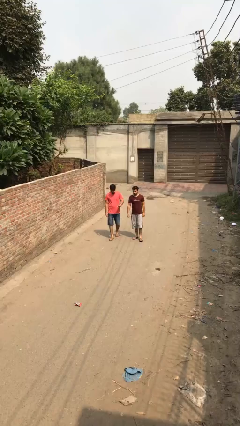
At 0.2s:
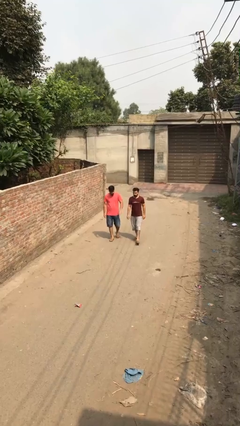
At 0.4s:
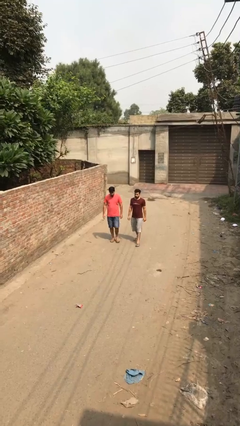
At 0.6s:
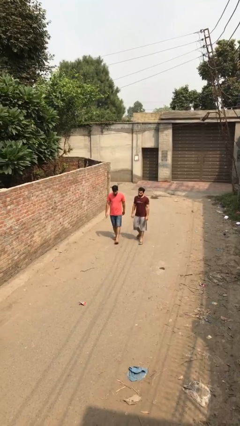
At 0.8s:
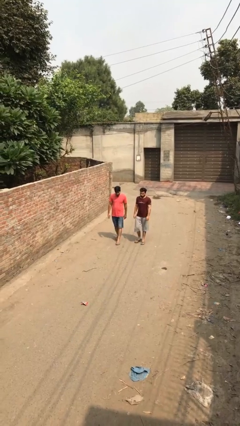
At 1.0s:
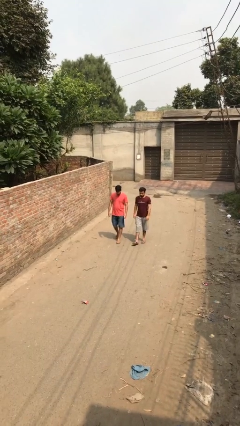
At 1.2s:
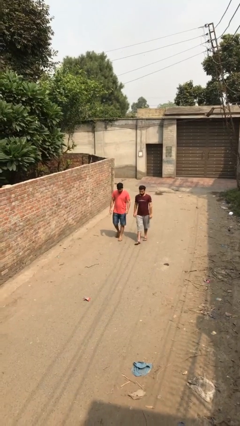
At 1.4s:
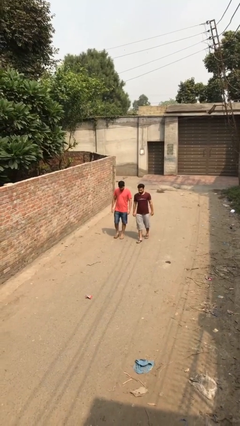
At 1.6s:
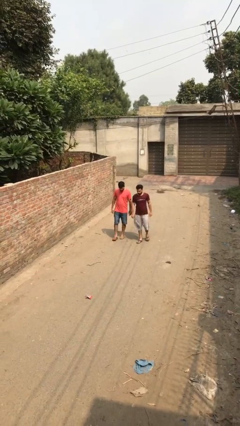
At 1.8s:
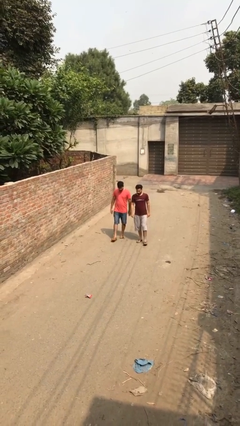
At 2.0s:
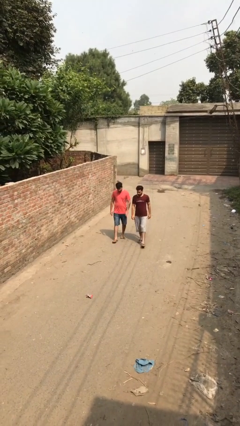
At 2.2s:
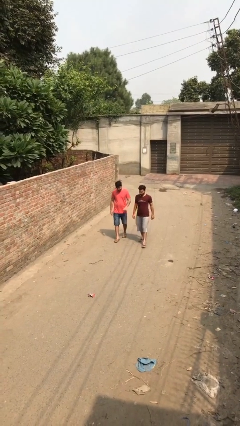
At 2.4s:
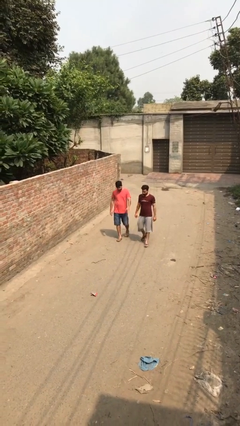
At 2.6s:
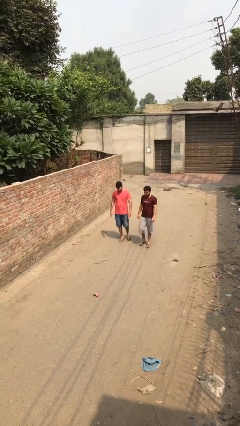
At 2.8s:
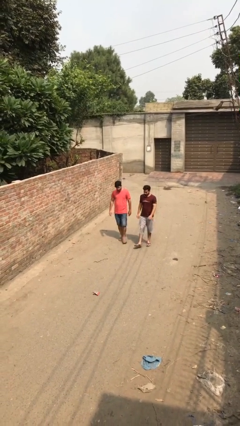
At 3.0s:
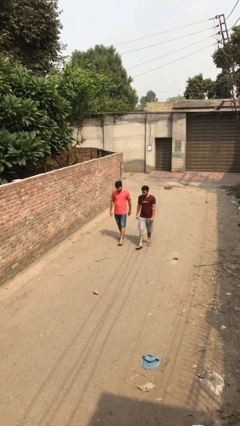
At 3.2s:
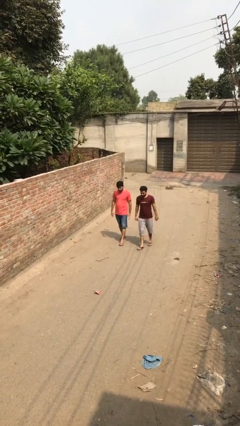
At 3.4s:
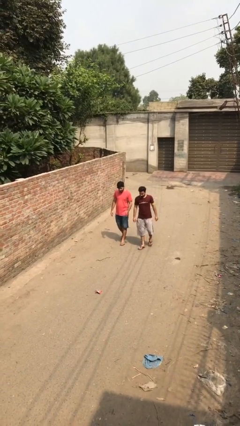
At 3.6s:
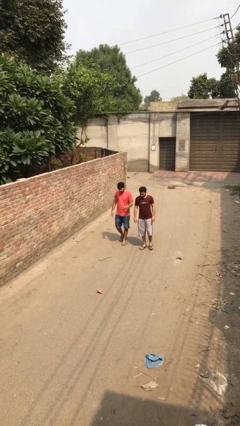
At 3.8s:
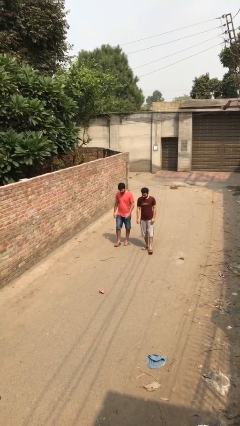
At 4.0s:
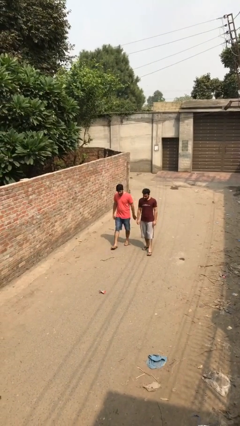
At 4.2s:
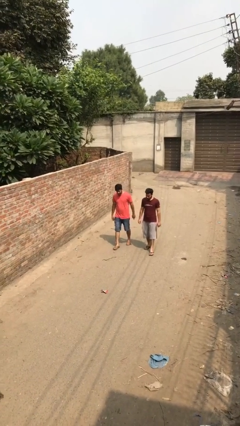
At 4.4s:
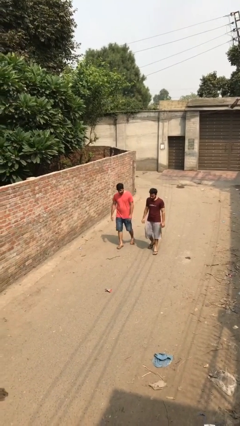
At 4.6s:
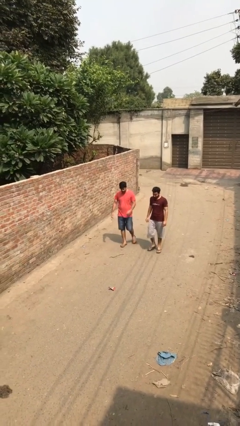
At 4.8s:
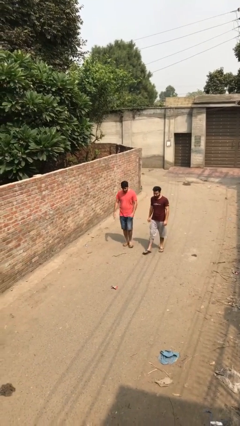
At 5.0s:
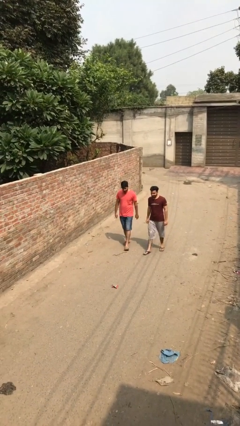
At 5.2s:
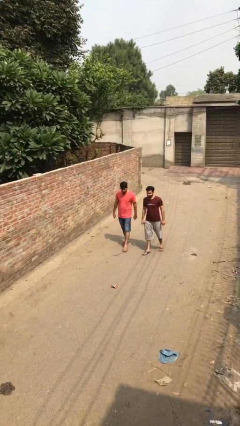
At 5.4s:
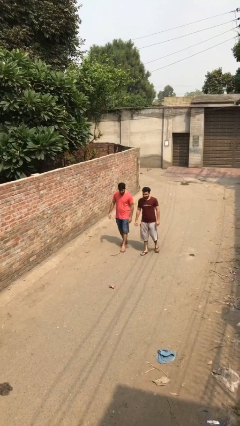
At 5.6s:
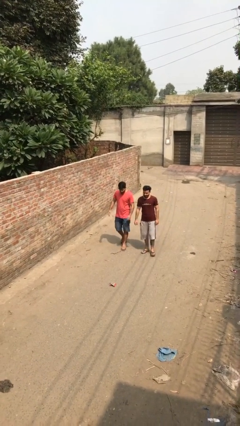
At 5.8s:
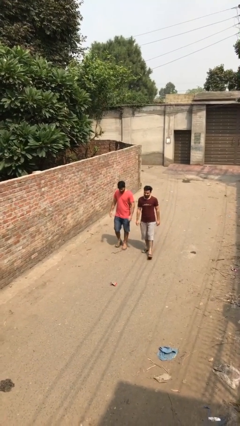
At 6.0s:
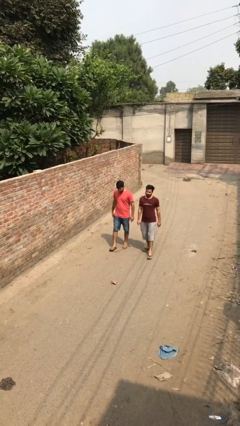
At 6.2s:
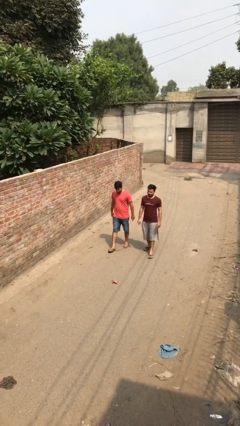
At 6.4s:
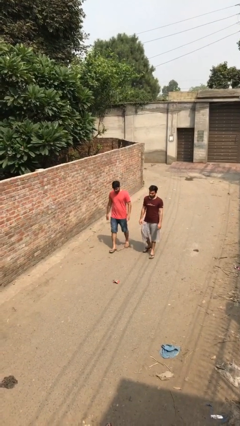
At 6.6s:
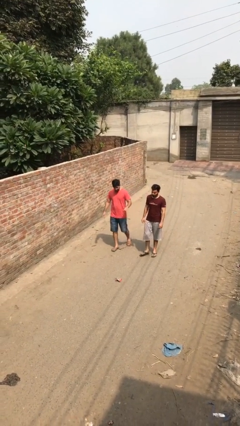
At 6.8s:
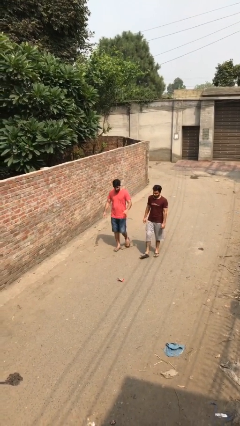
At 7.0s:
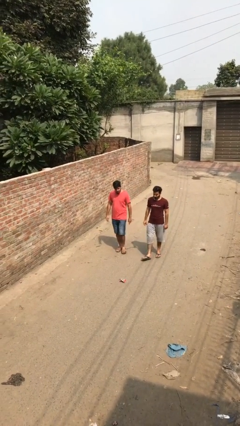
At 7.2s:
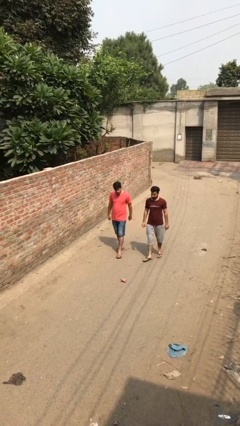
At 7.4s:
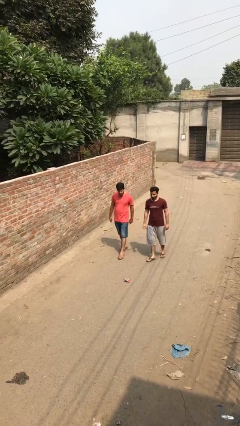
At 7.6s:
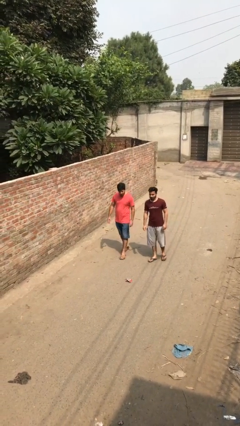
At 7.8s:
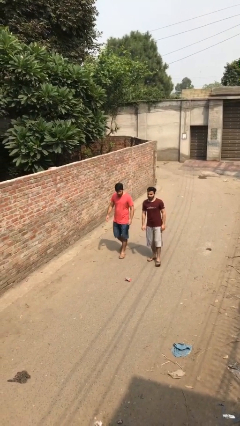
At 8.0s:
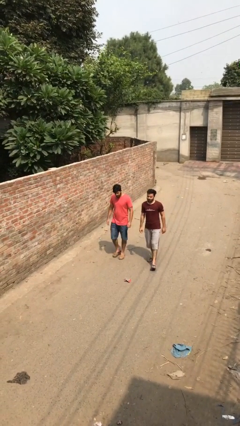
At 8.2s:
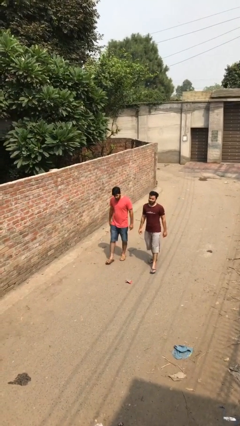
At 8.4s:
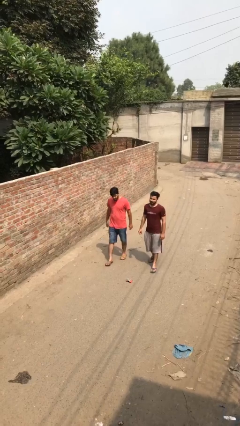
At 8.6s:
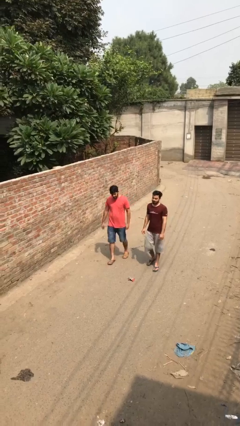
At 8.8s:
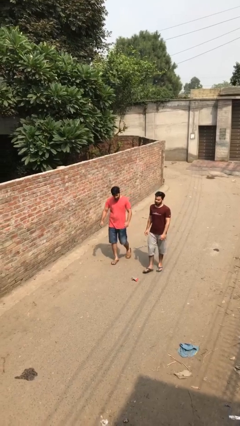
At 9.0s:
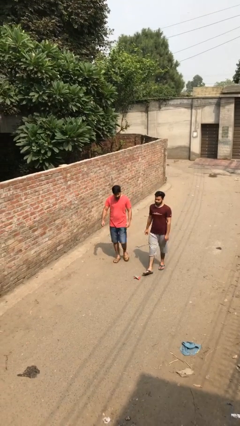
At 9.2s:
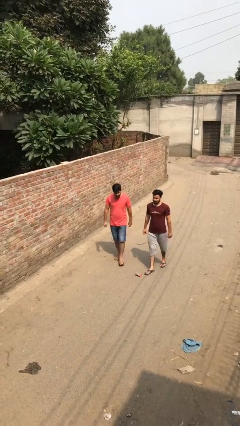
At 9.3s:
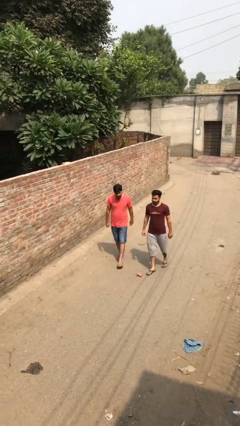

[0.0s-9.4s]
person talks to person

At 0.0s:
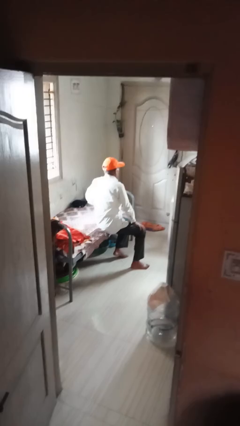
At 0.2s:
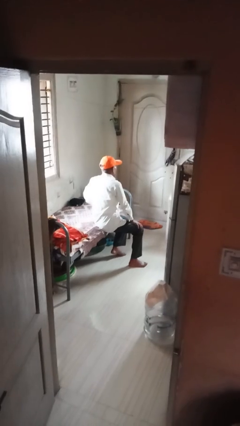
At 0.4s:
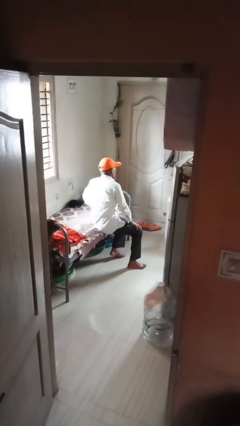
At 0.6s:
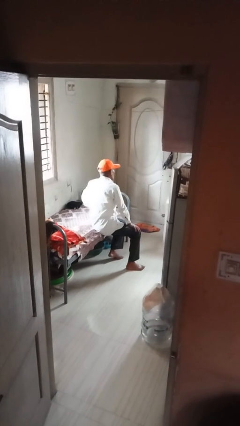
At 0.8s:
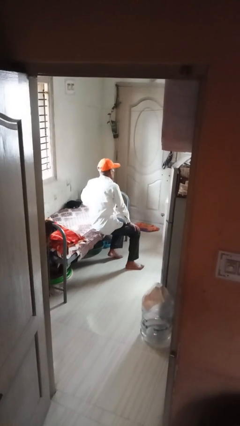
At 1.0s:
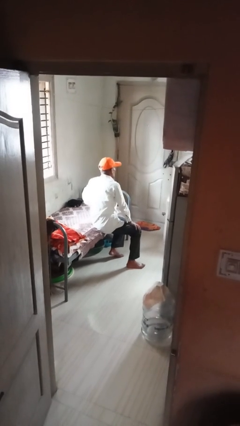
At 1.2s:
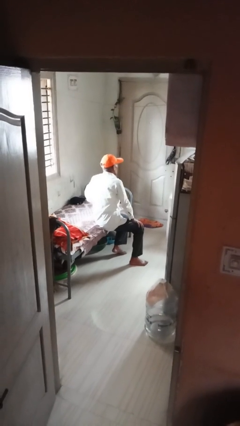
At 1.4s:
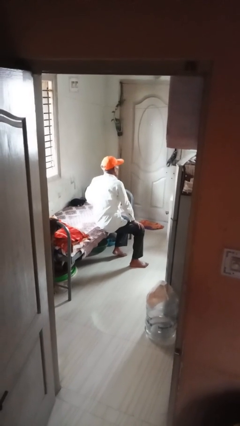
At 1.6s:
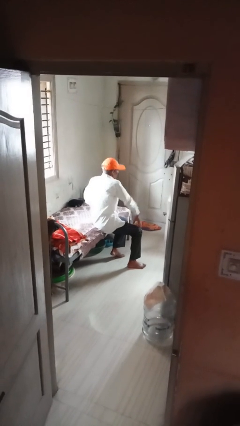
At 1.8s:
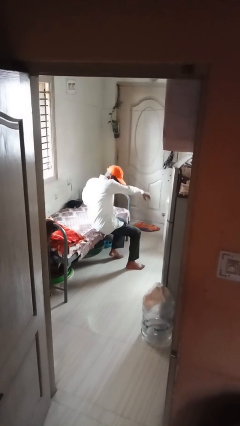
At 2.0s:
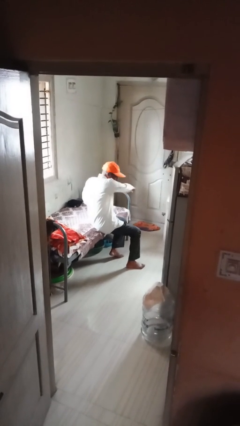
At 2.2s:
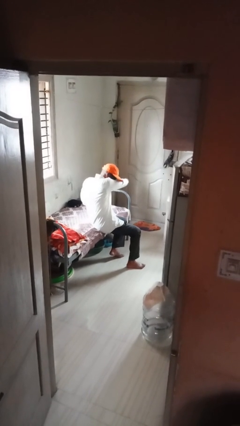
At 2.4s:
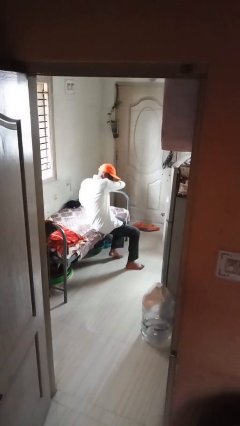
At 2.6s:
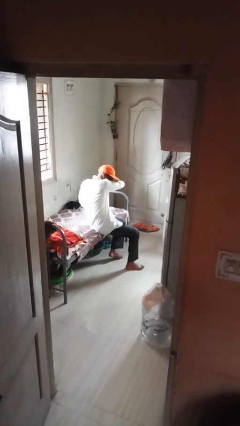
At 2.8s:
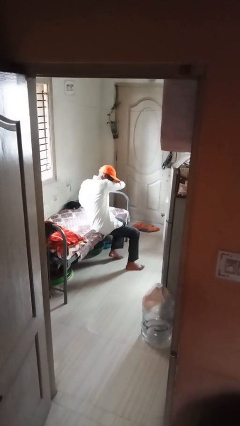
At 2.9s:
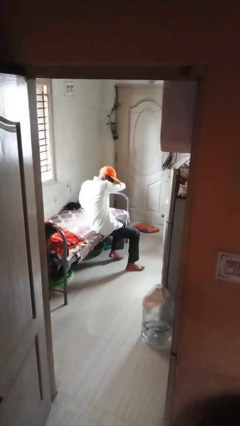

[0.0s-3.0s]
person sneezes into arm

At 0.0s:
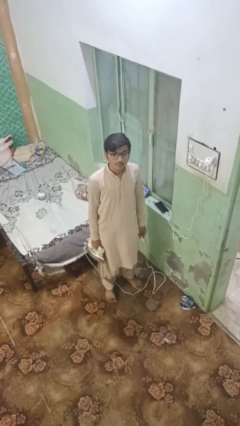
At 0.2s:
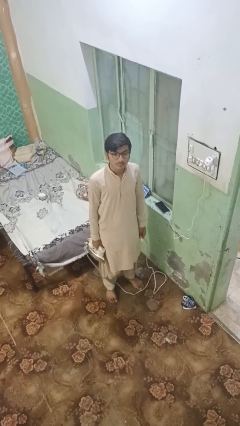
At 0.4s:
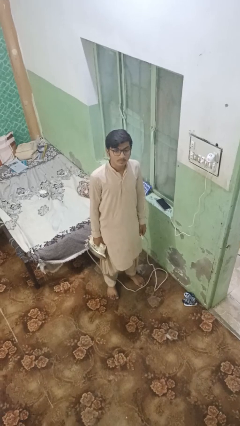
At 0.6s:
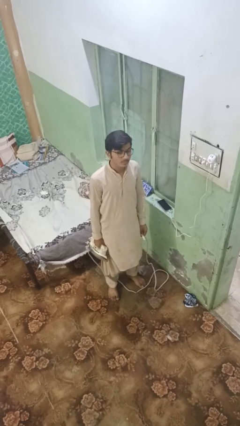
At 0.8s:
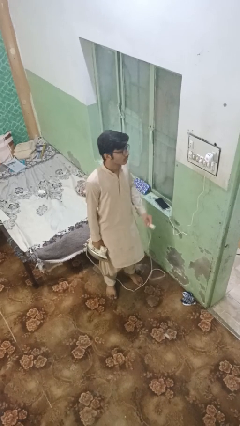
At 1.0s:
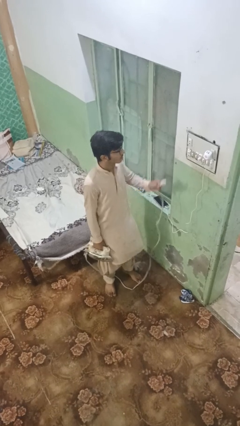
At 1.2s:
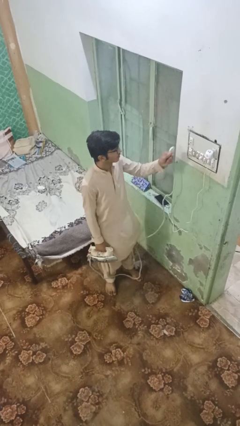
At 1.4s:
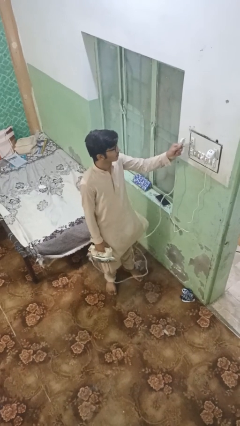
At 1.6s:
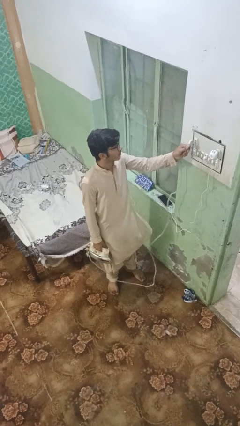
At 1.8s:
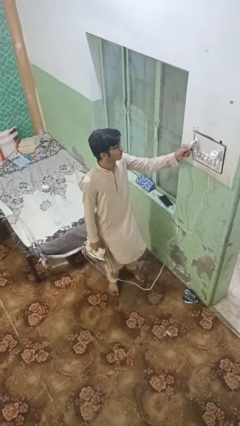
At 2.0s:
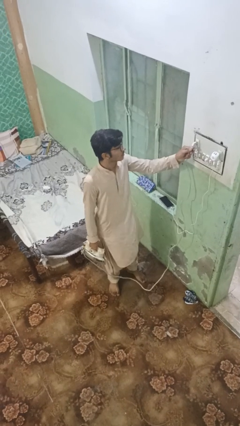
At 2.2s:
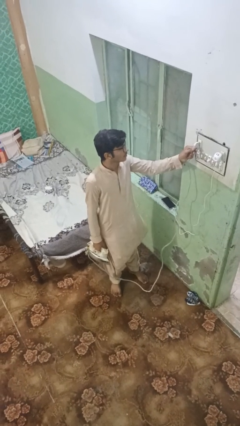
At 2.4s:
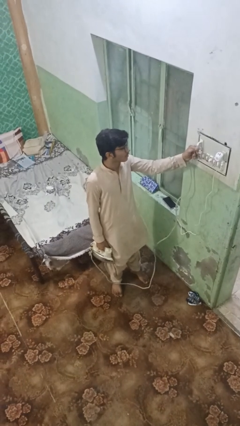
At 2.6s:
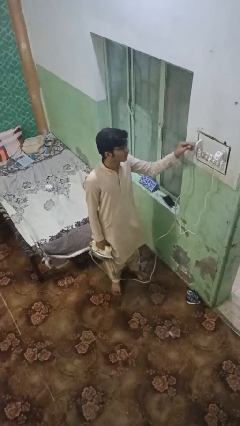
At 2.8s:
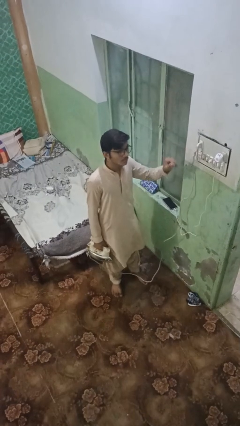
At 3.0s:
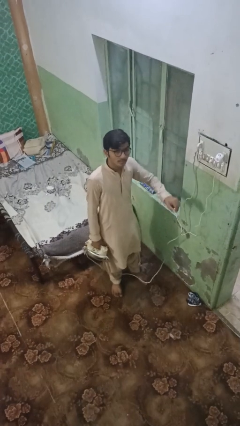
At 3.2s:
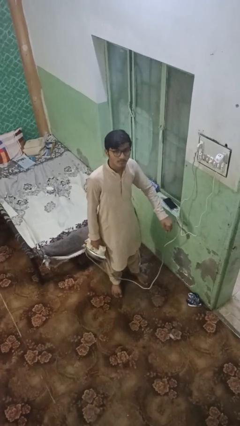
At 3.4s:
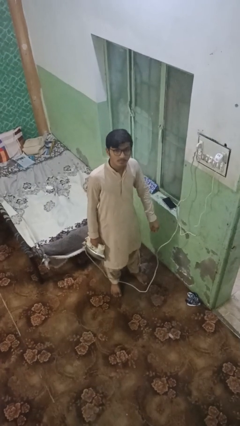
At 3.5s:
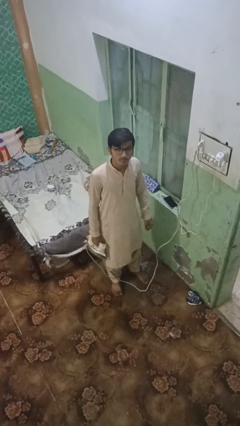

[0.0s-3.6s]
person plugs into electrical socket

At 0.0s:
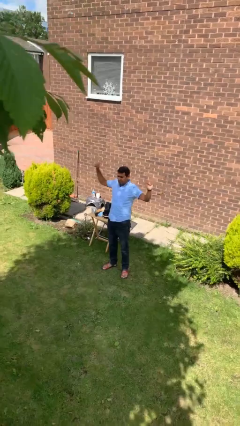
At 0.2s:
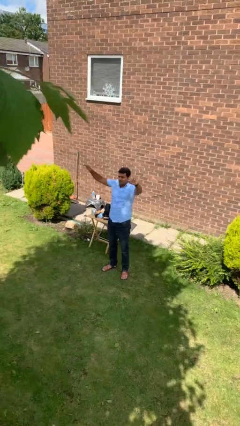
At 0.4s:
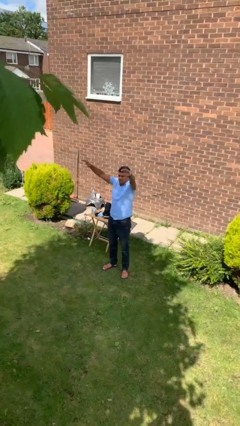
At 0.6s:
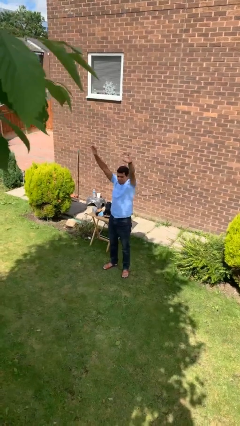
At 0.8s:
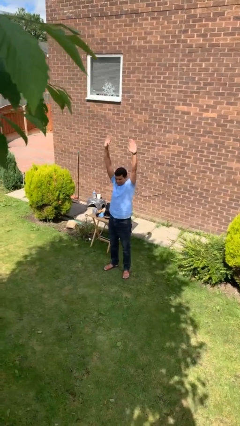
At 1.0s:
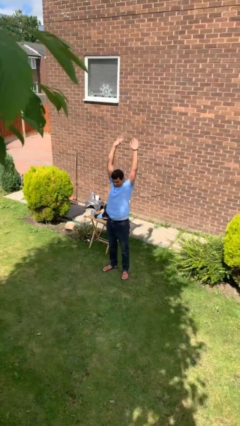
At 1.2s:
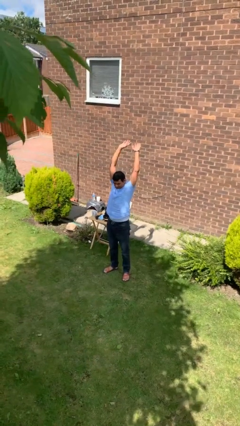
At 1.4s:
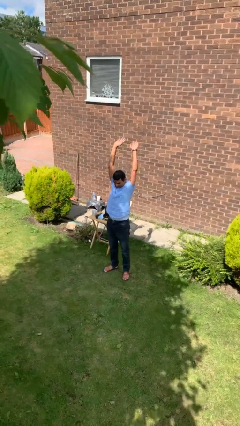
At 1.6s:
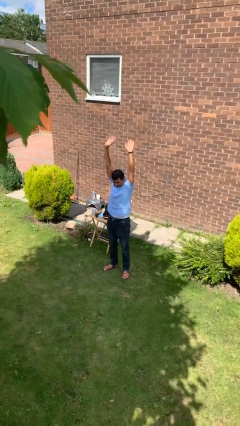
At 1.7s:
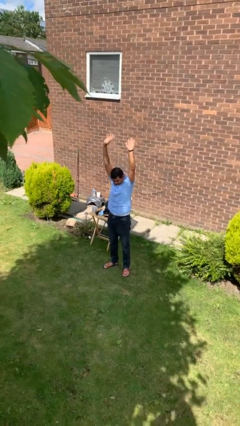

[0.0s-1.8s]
person stretches arms over head

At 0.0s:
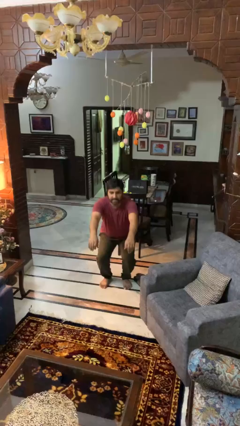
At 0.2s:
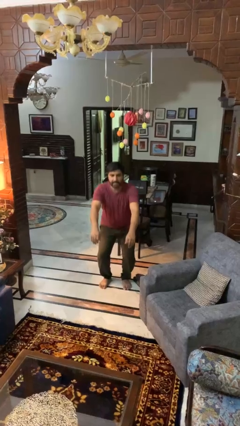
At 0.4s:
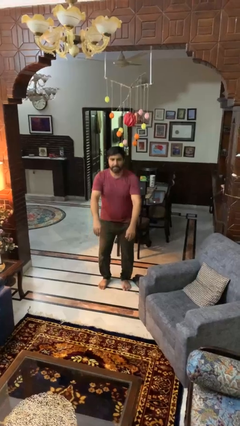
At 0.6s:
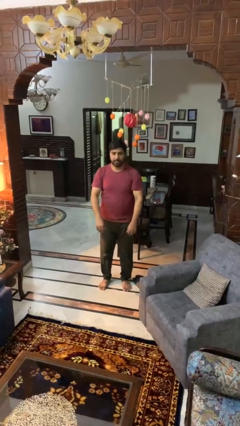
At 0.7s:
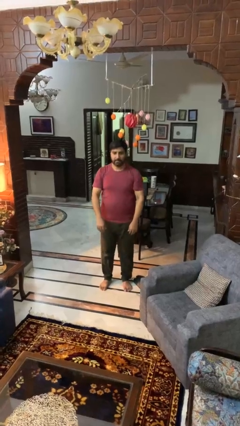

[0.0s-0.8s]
person stands up
